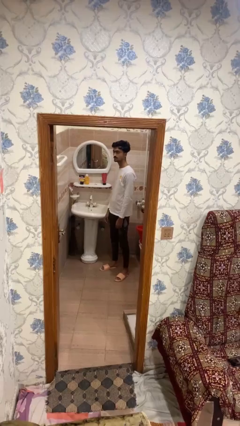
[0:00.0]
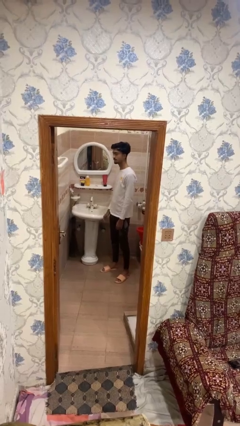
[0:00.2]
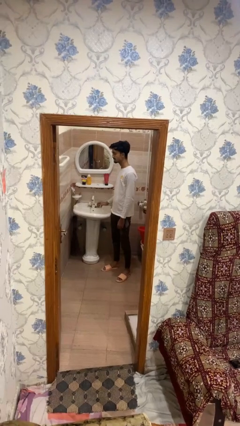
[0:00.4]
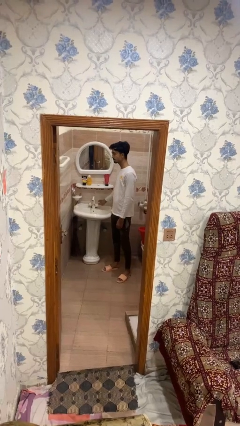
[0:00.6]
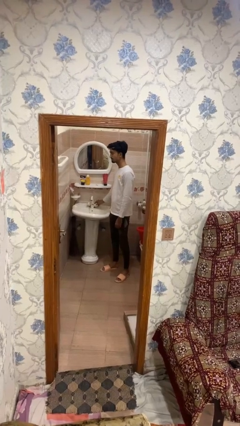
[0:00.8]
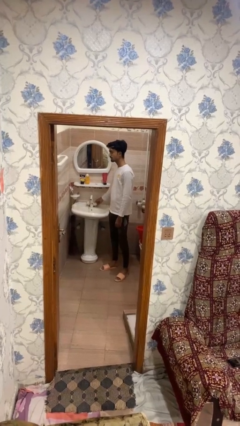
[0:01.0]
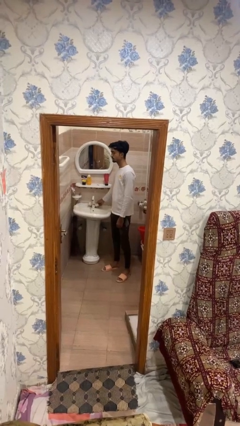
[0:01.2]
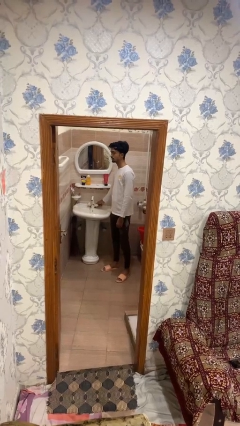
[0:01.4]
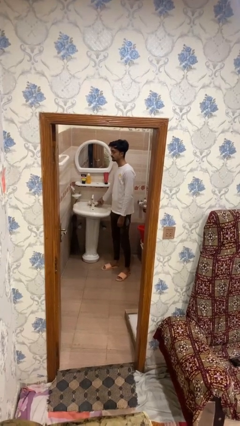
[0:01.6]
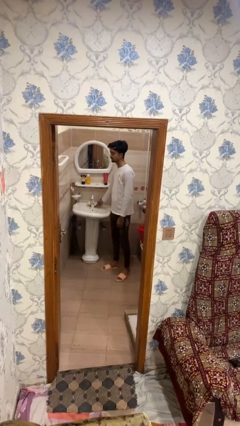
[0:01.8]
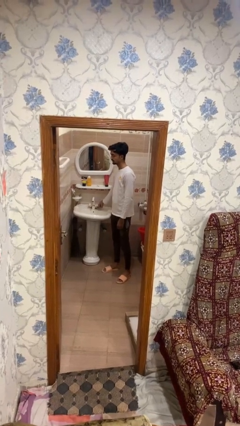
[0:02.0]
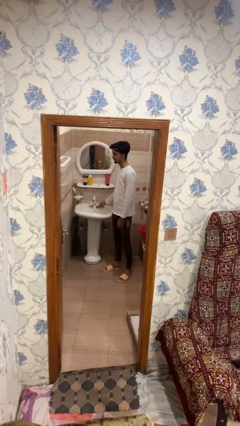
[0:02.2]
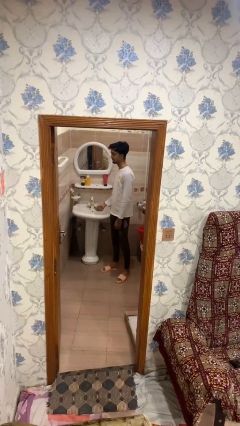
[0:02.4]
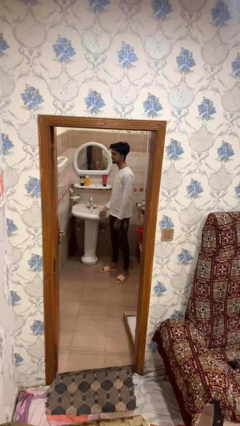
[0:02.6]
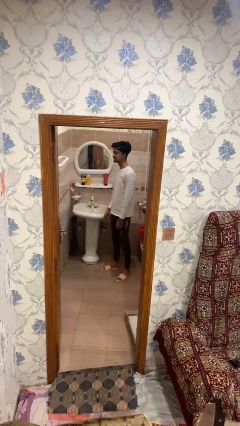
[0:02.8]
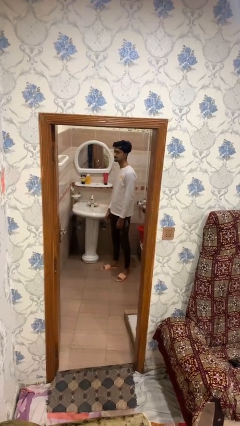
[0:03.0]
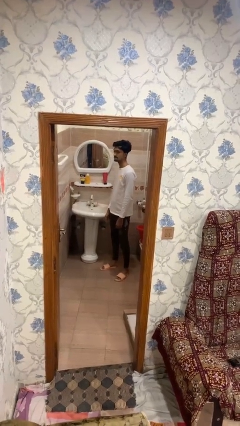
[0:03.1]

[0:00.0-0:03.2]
person turns off faucet

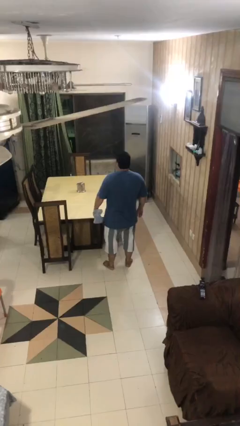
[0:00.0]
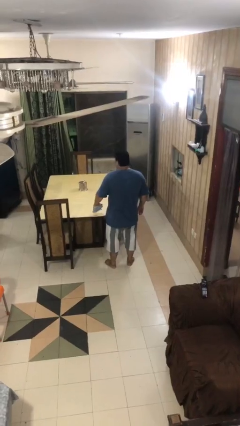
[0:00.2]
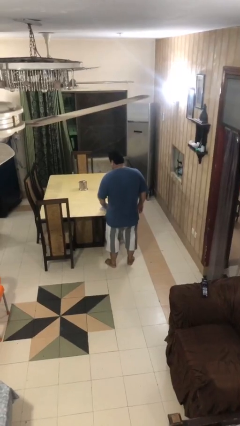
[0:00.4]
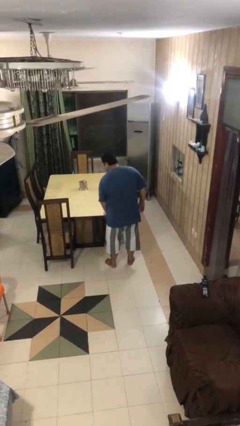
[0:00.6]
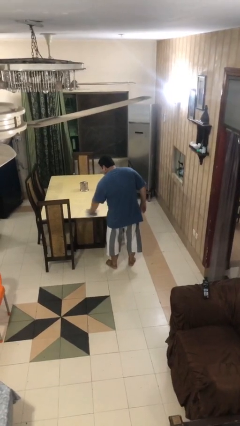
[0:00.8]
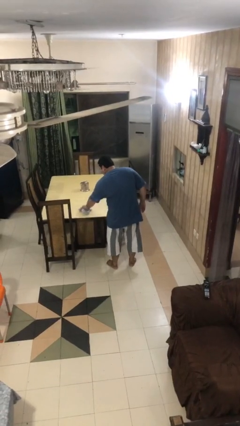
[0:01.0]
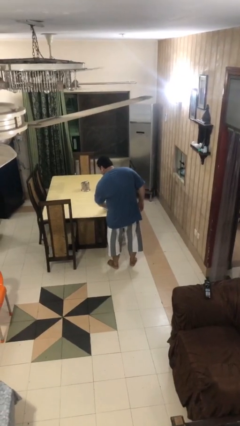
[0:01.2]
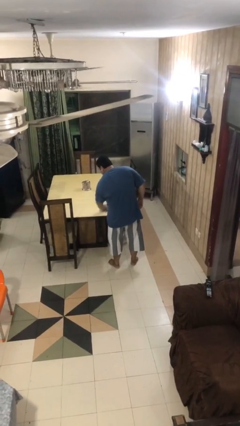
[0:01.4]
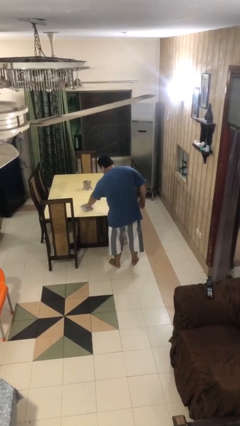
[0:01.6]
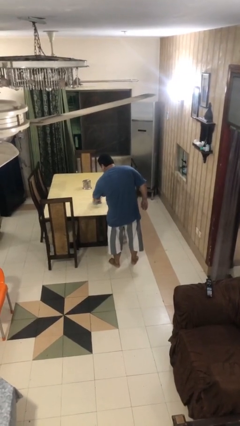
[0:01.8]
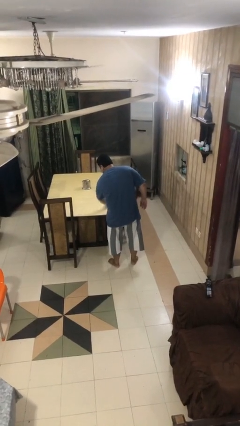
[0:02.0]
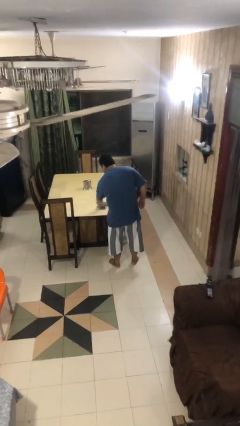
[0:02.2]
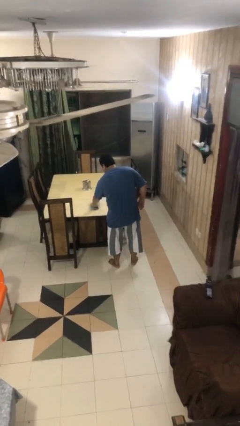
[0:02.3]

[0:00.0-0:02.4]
person cleans table with rag

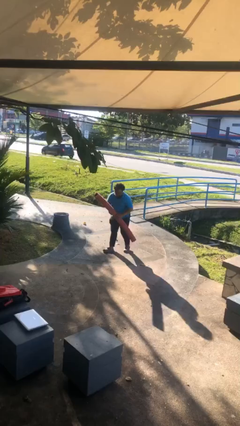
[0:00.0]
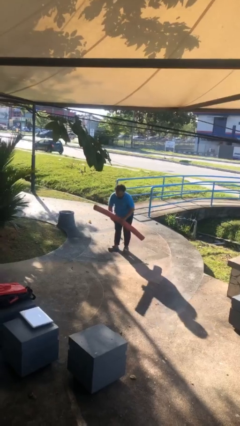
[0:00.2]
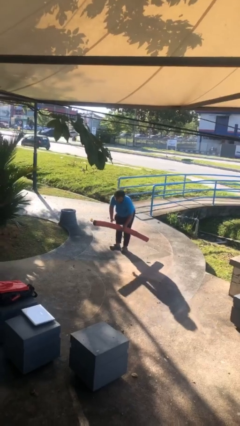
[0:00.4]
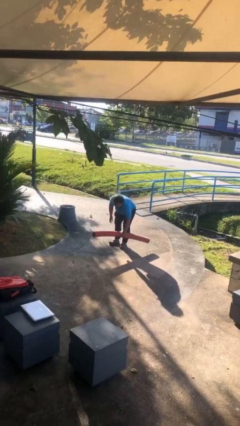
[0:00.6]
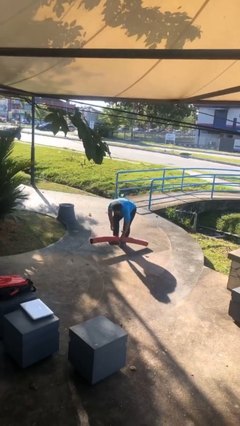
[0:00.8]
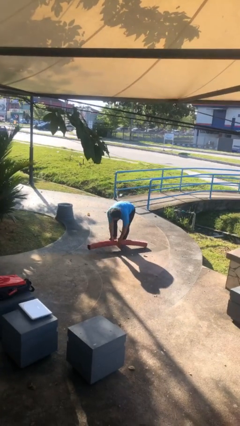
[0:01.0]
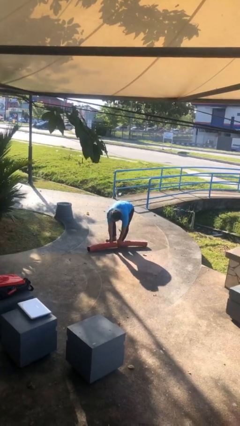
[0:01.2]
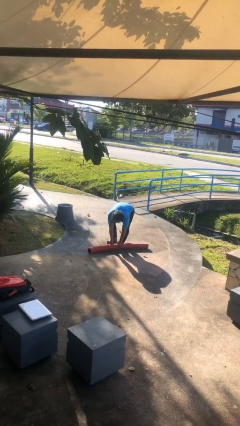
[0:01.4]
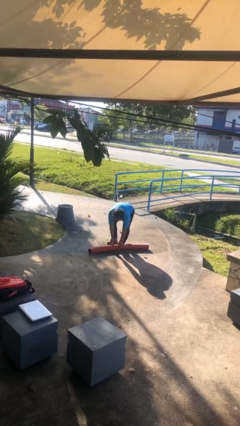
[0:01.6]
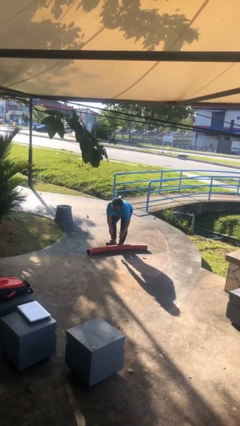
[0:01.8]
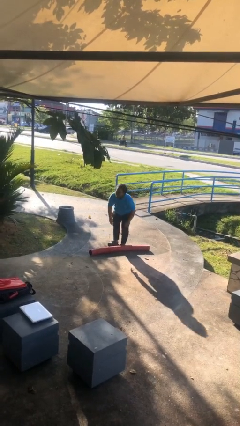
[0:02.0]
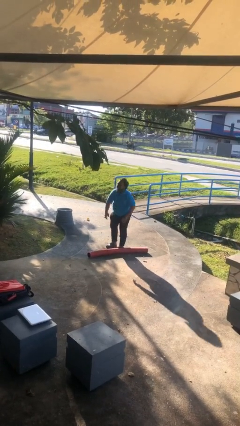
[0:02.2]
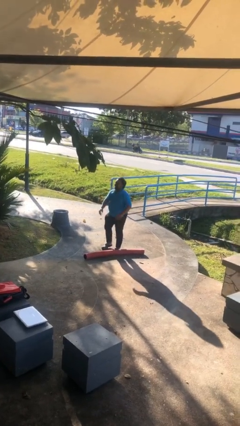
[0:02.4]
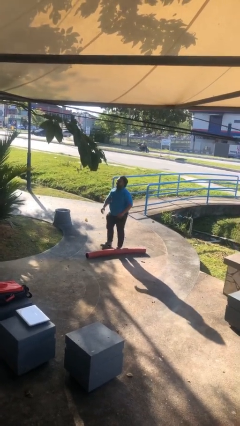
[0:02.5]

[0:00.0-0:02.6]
person puts down object on floor

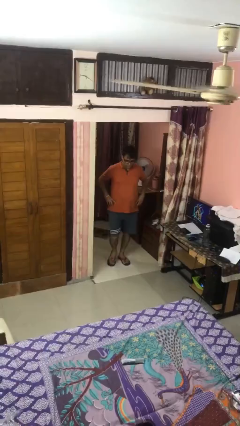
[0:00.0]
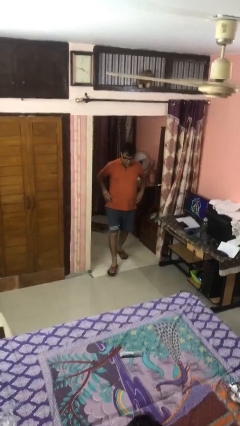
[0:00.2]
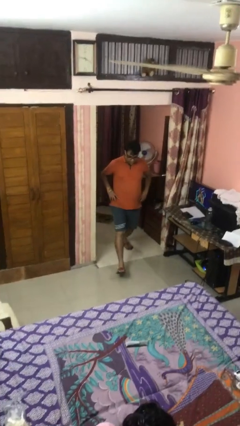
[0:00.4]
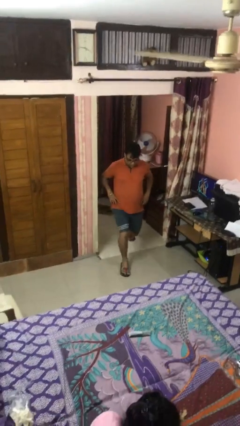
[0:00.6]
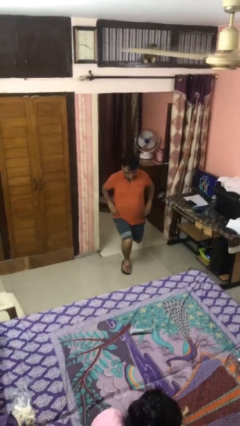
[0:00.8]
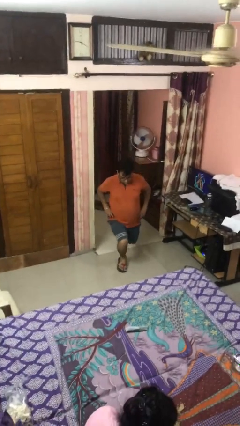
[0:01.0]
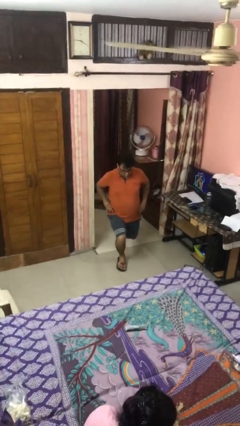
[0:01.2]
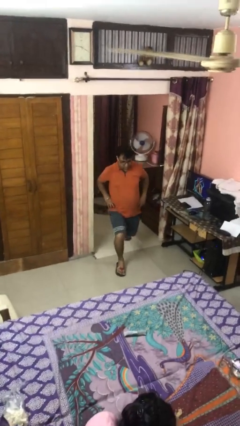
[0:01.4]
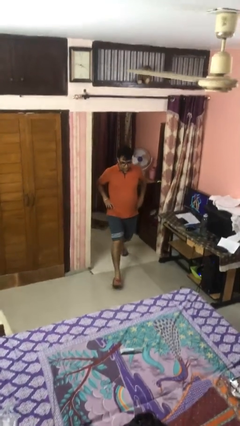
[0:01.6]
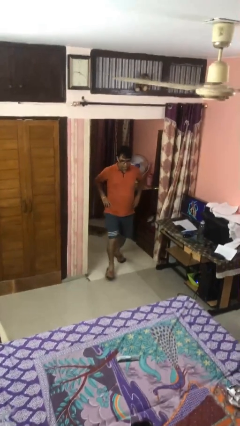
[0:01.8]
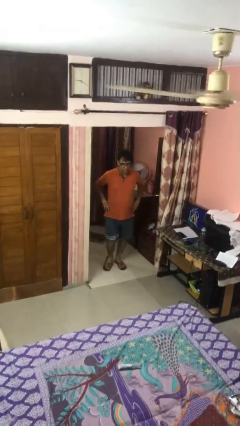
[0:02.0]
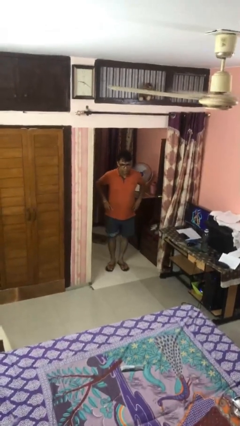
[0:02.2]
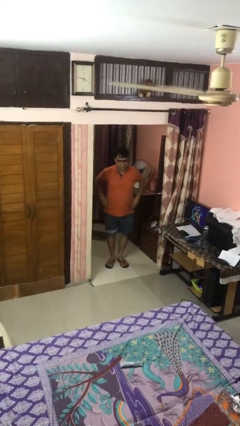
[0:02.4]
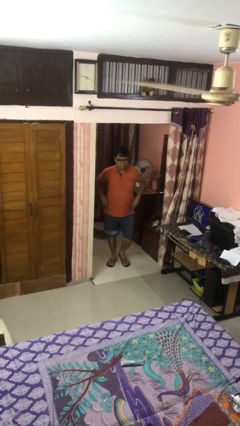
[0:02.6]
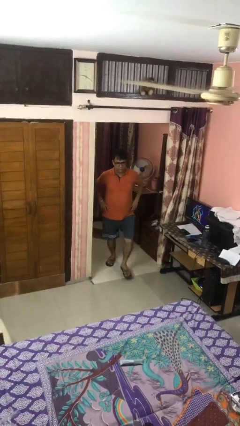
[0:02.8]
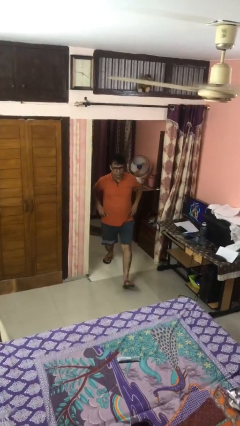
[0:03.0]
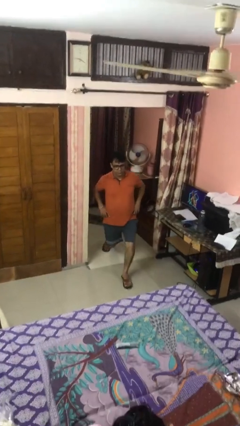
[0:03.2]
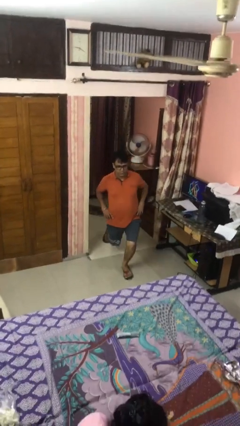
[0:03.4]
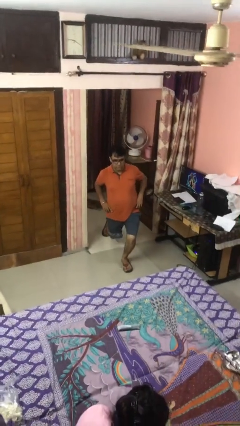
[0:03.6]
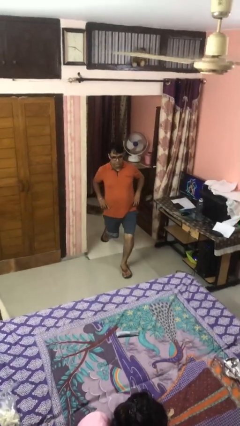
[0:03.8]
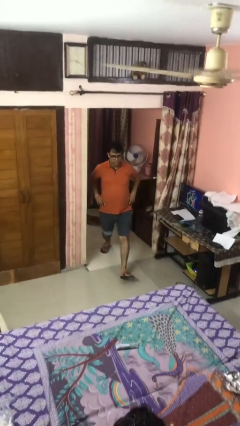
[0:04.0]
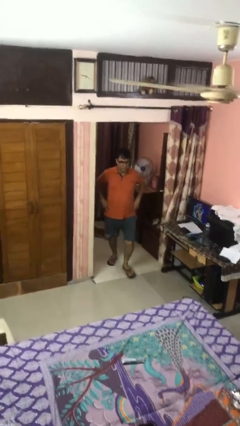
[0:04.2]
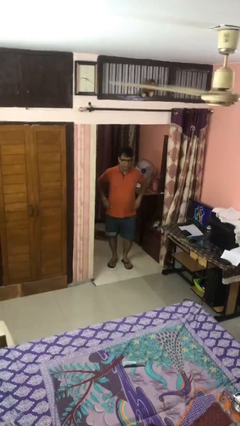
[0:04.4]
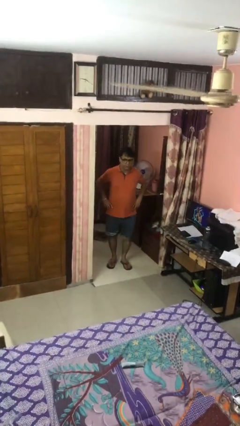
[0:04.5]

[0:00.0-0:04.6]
person exercises with lunges

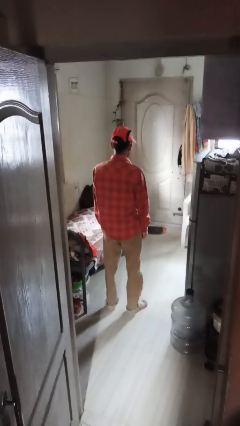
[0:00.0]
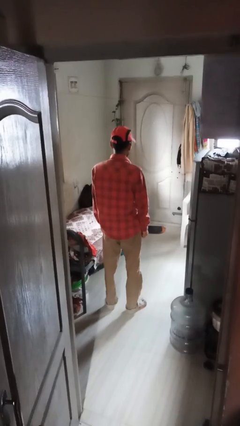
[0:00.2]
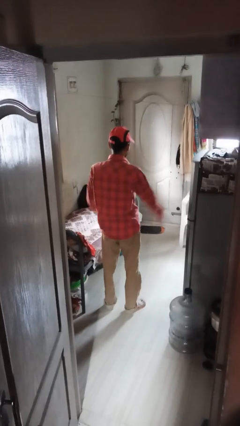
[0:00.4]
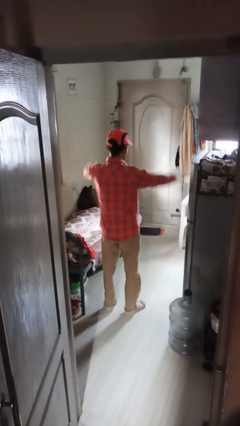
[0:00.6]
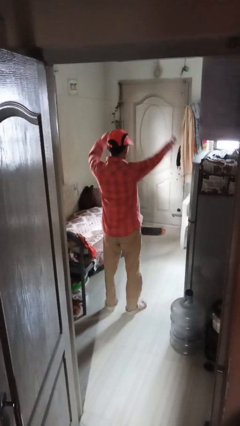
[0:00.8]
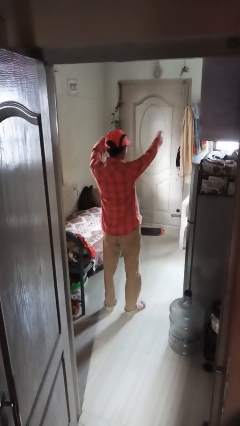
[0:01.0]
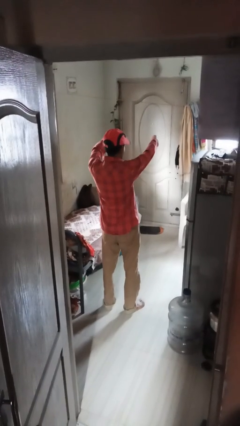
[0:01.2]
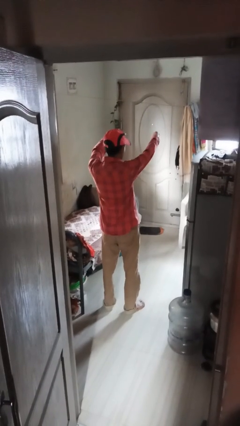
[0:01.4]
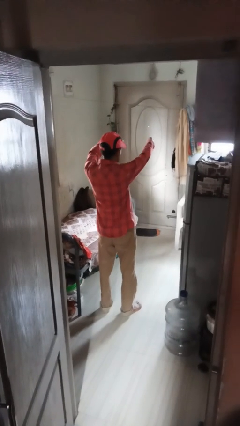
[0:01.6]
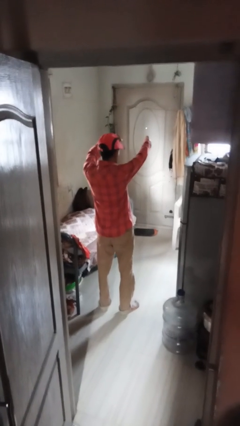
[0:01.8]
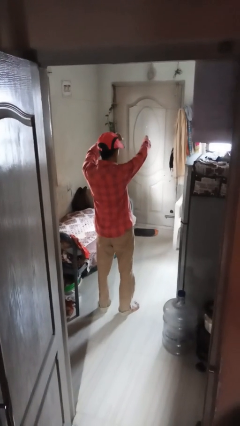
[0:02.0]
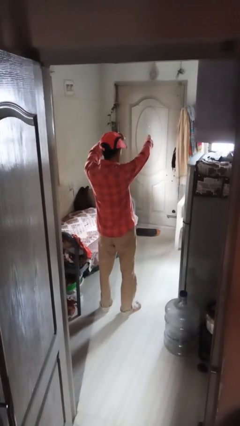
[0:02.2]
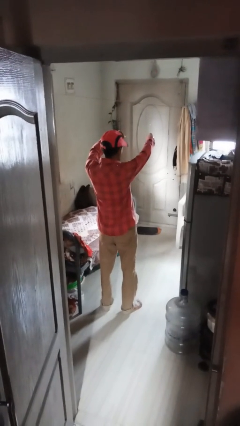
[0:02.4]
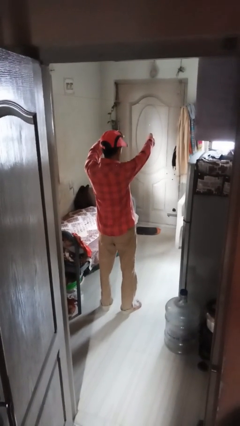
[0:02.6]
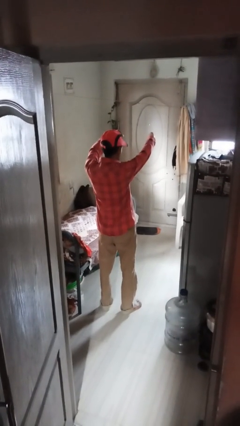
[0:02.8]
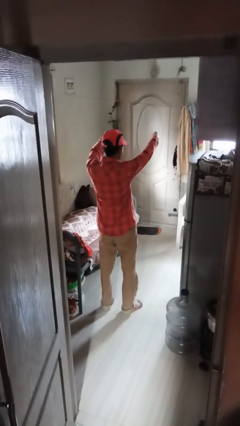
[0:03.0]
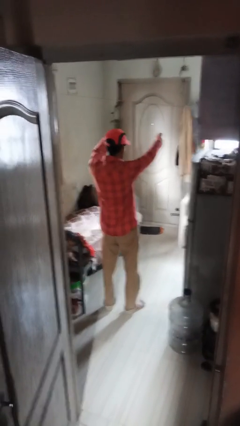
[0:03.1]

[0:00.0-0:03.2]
person gestures thumbs down

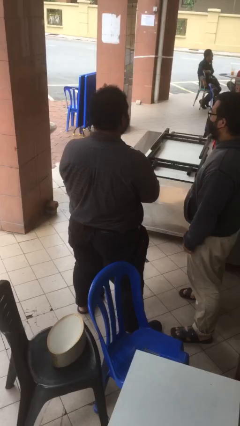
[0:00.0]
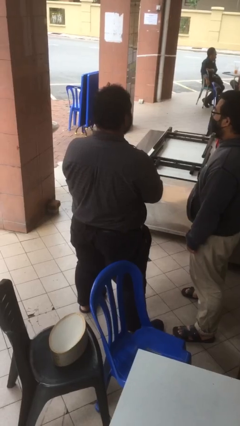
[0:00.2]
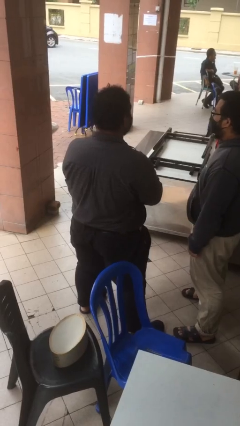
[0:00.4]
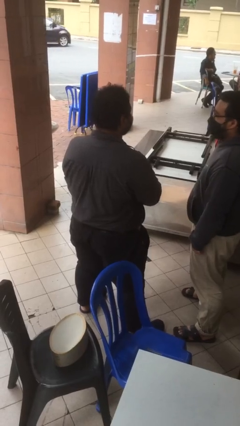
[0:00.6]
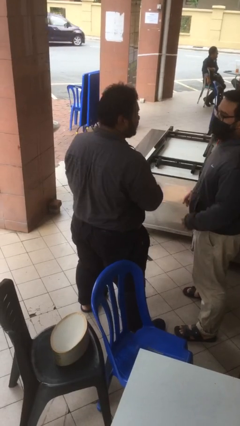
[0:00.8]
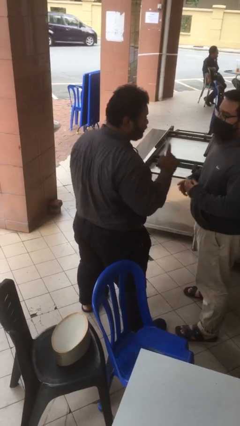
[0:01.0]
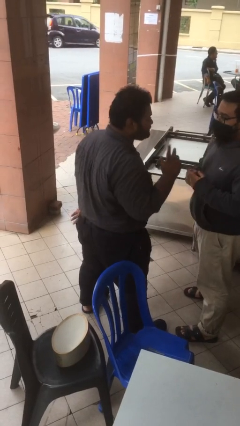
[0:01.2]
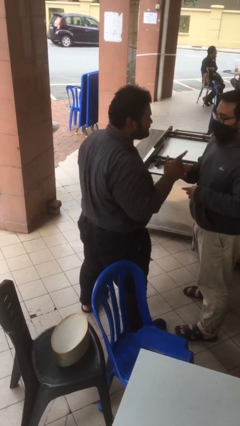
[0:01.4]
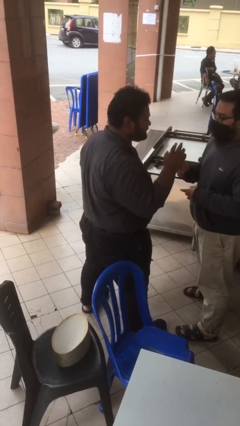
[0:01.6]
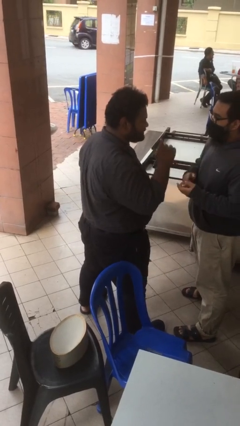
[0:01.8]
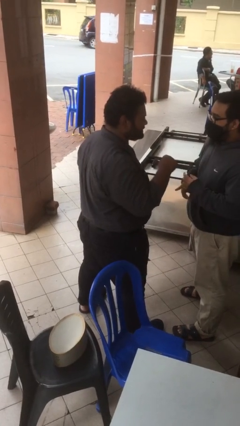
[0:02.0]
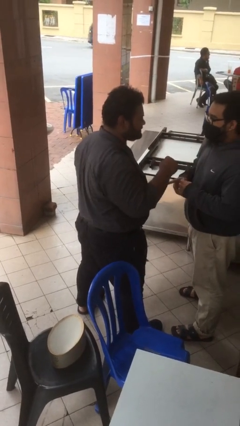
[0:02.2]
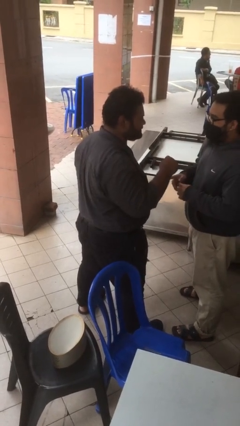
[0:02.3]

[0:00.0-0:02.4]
person talks to person
